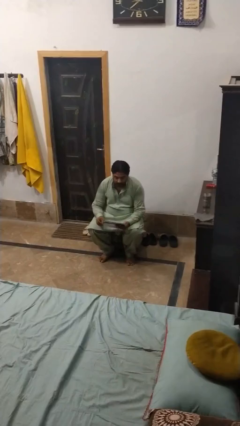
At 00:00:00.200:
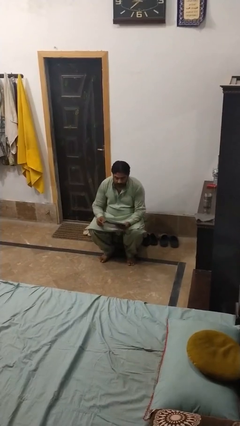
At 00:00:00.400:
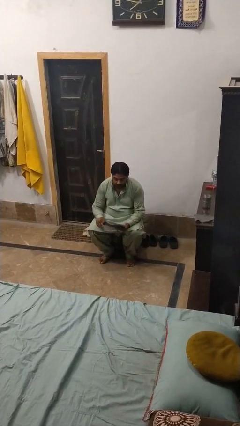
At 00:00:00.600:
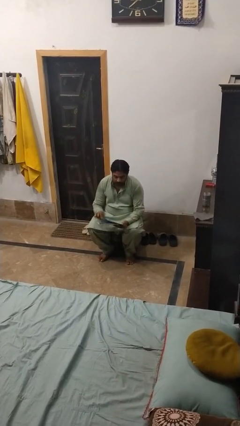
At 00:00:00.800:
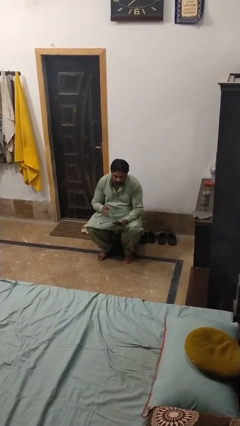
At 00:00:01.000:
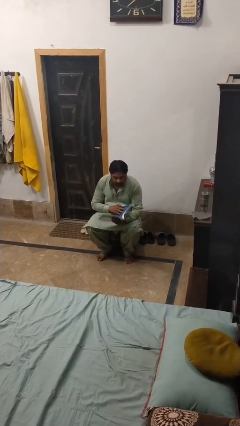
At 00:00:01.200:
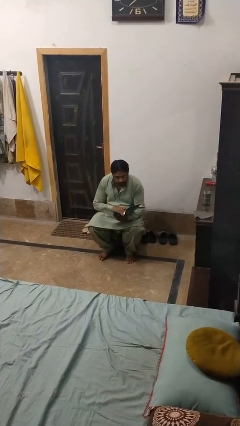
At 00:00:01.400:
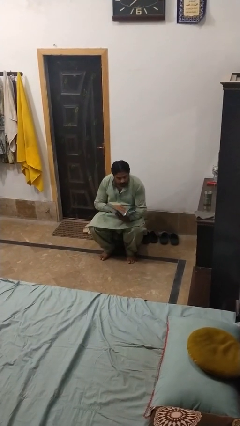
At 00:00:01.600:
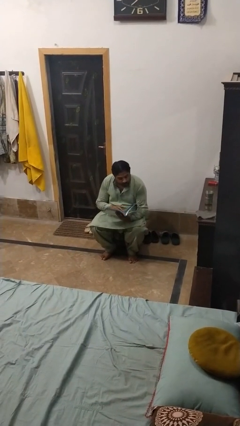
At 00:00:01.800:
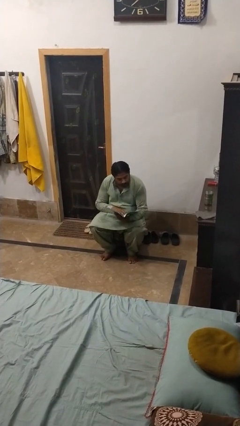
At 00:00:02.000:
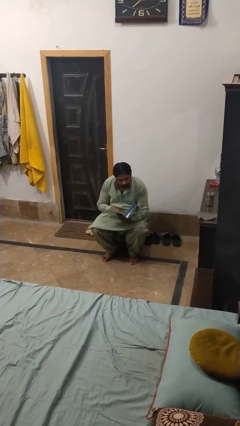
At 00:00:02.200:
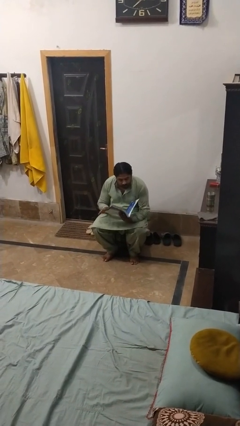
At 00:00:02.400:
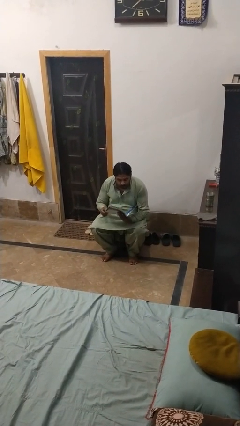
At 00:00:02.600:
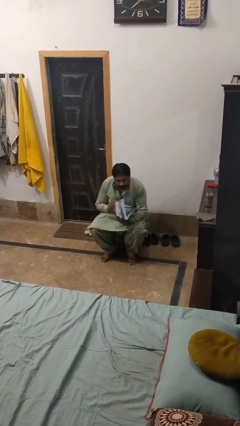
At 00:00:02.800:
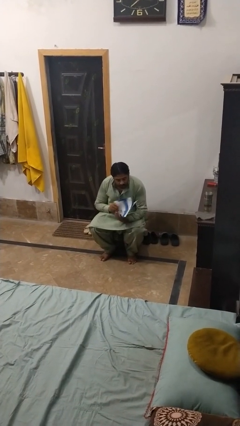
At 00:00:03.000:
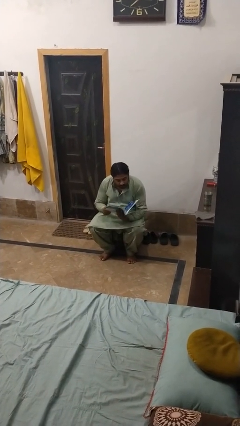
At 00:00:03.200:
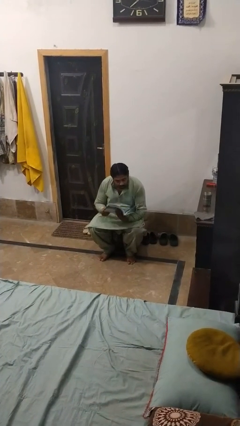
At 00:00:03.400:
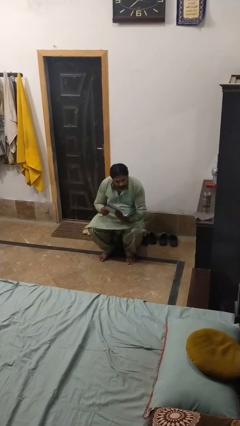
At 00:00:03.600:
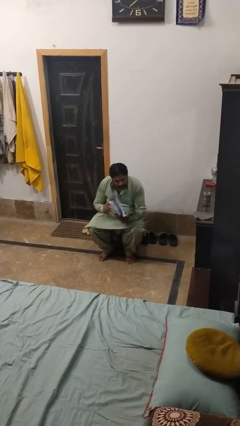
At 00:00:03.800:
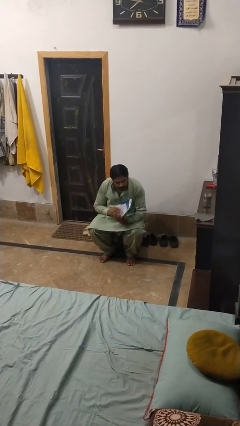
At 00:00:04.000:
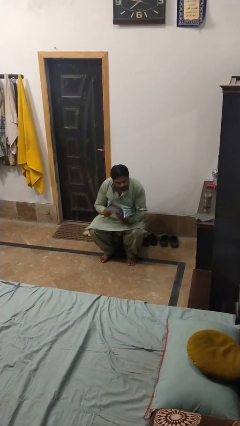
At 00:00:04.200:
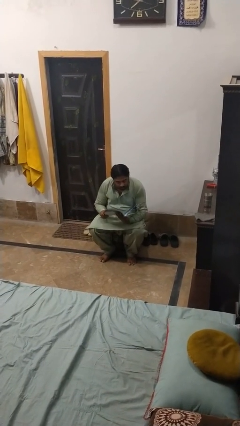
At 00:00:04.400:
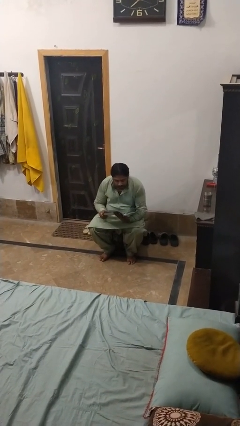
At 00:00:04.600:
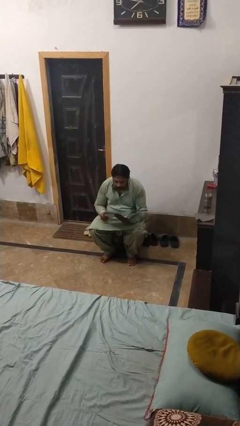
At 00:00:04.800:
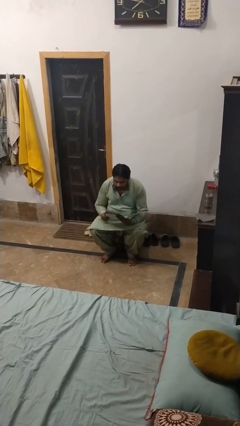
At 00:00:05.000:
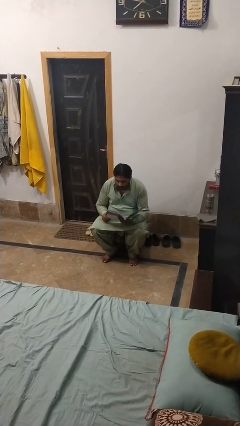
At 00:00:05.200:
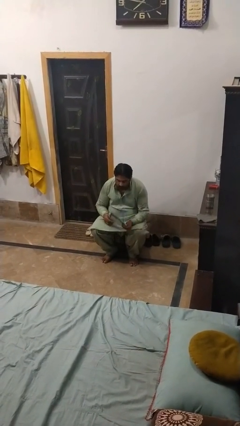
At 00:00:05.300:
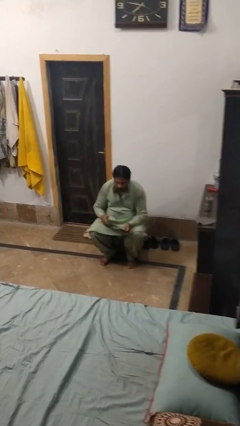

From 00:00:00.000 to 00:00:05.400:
person reads magazine

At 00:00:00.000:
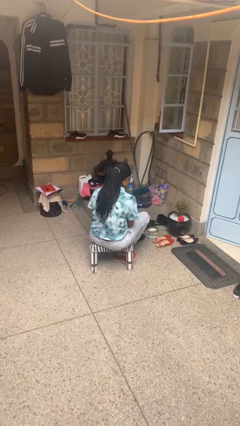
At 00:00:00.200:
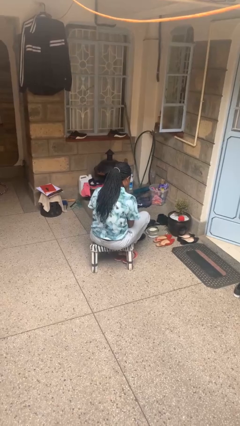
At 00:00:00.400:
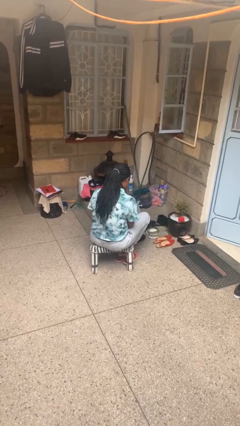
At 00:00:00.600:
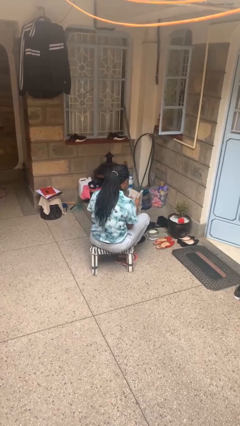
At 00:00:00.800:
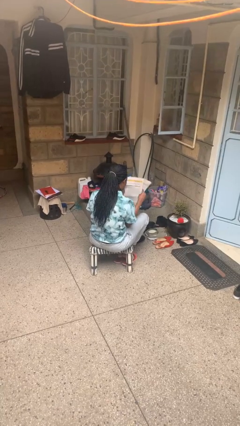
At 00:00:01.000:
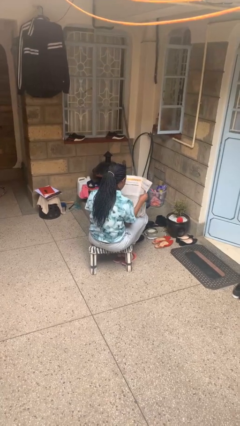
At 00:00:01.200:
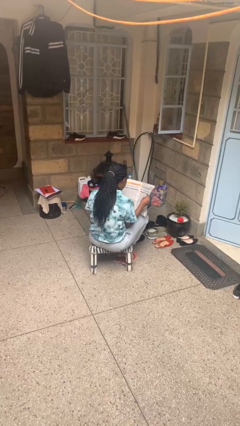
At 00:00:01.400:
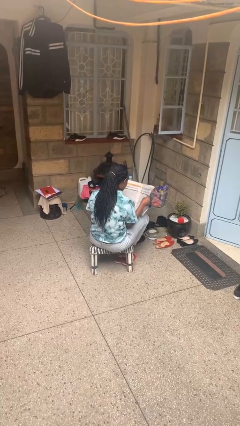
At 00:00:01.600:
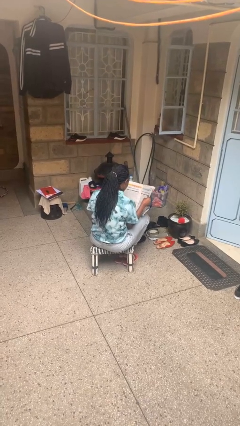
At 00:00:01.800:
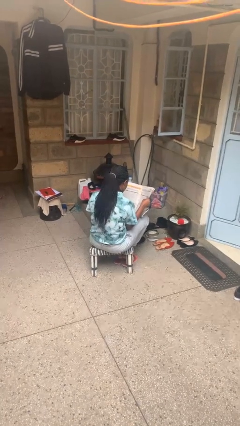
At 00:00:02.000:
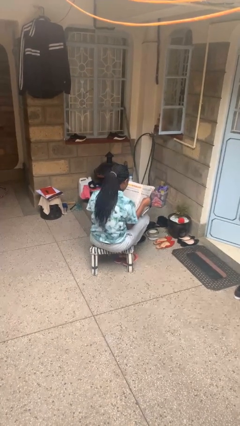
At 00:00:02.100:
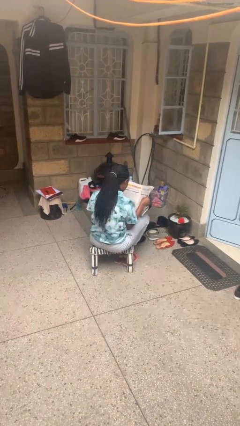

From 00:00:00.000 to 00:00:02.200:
person reads newspaper

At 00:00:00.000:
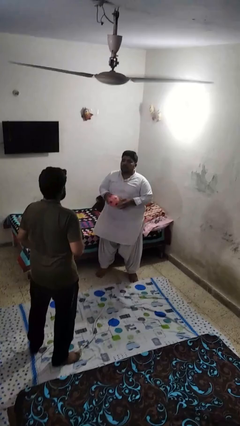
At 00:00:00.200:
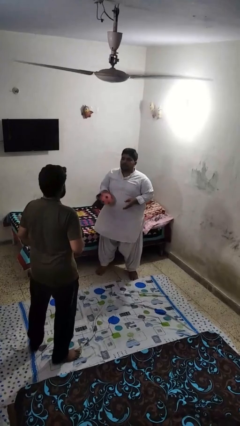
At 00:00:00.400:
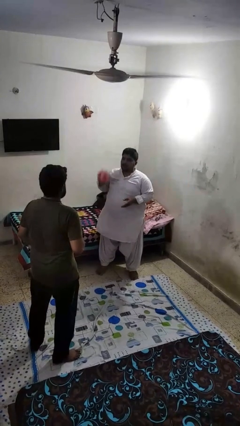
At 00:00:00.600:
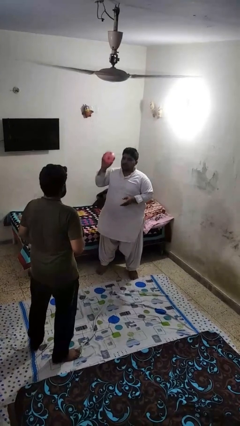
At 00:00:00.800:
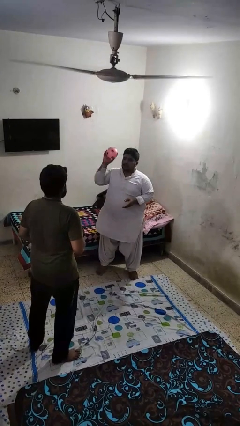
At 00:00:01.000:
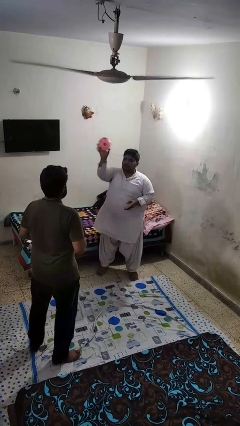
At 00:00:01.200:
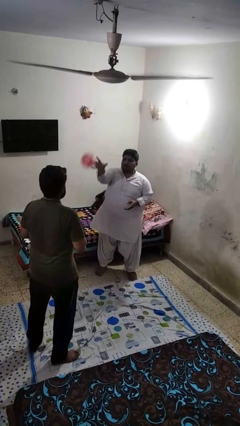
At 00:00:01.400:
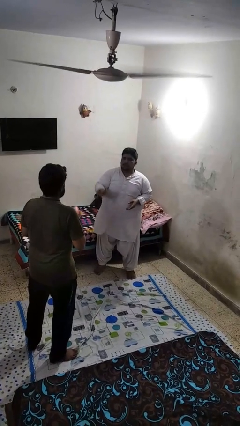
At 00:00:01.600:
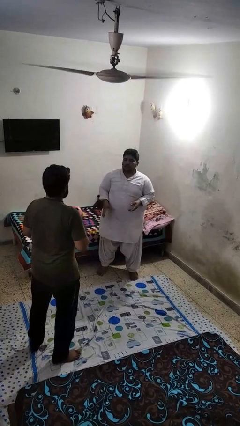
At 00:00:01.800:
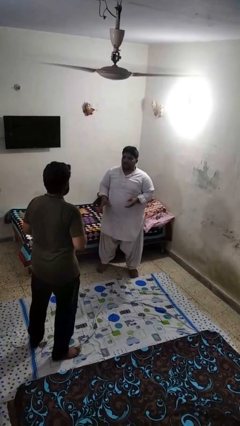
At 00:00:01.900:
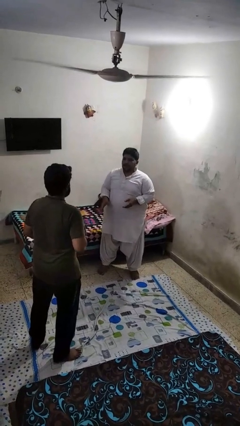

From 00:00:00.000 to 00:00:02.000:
person throws object to person

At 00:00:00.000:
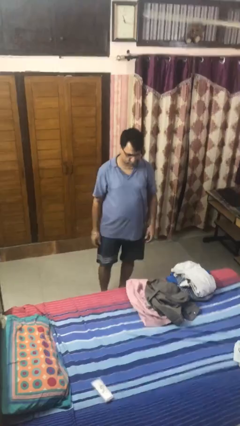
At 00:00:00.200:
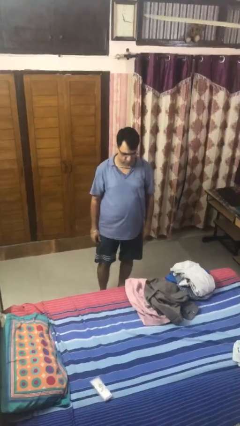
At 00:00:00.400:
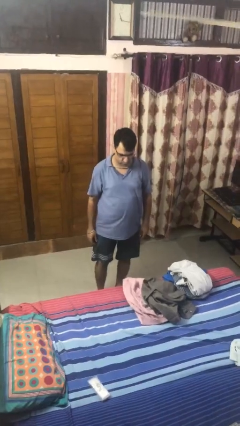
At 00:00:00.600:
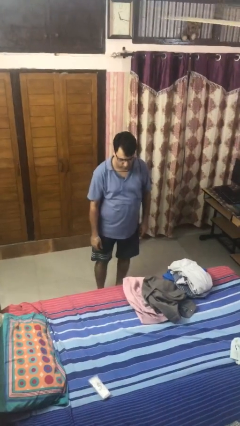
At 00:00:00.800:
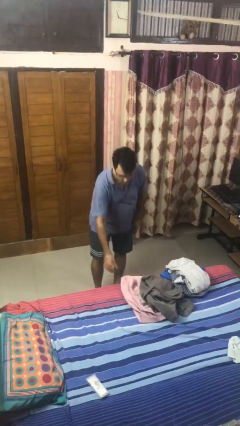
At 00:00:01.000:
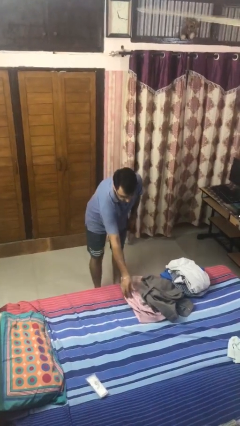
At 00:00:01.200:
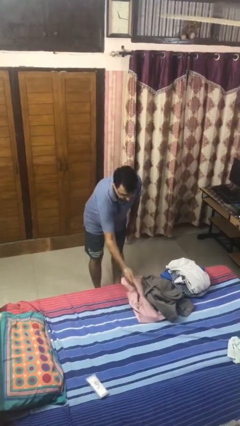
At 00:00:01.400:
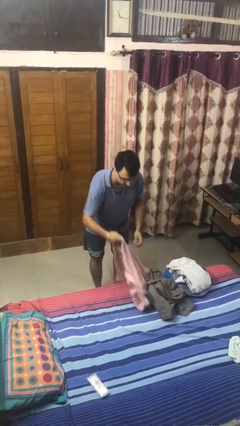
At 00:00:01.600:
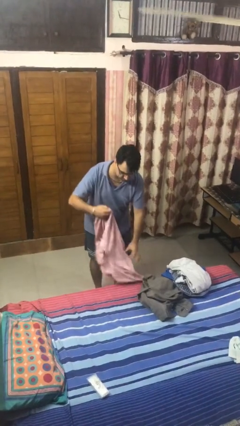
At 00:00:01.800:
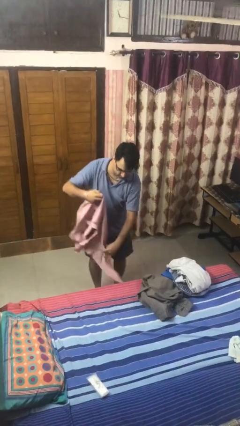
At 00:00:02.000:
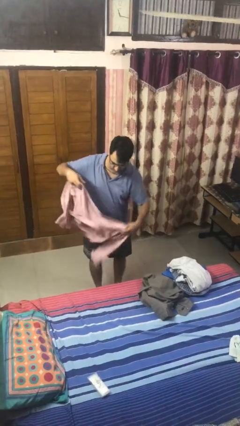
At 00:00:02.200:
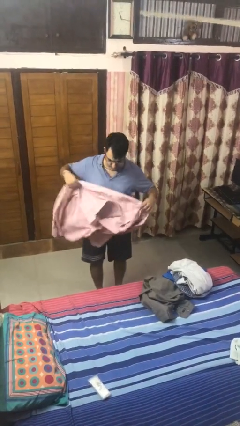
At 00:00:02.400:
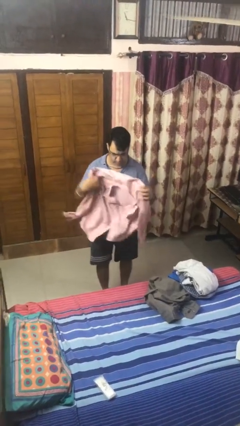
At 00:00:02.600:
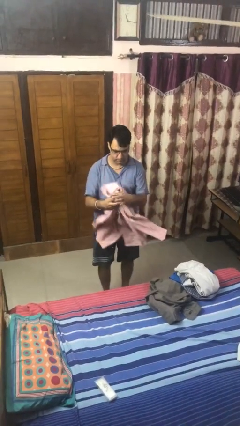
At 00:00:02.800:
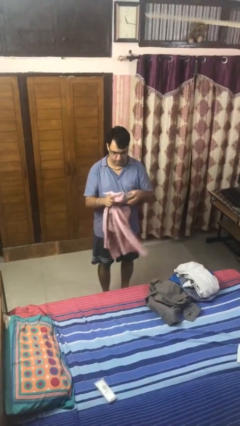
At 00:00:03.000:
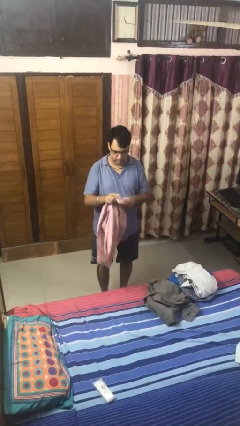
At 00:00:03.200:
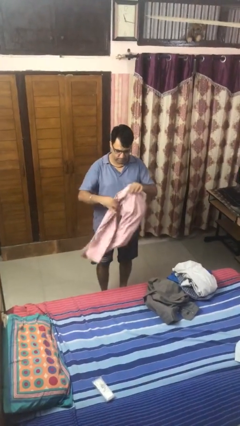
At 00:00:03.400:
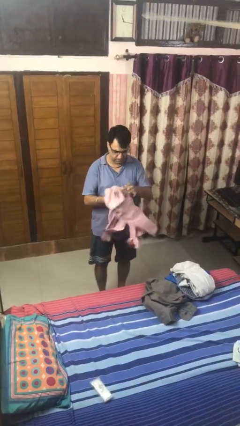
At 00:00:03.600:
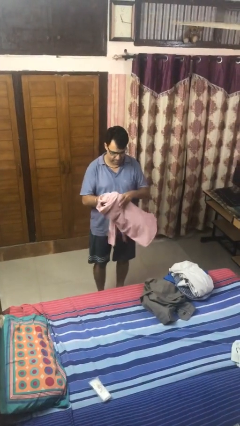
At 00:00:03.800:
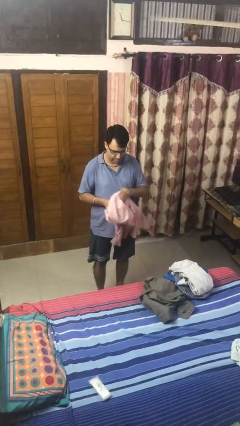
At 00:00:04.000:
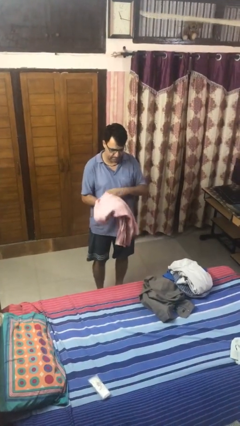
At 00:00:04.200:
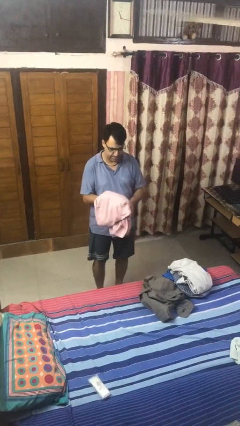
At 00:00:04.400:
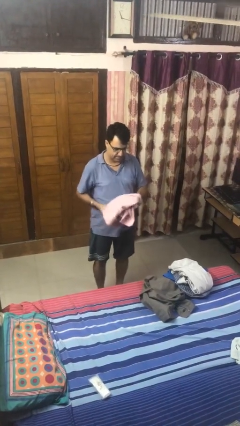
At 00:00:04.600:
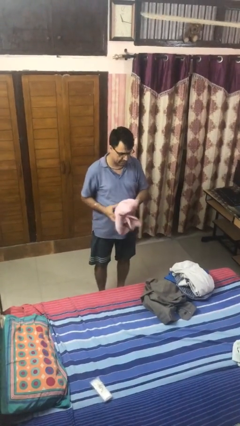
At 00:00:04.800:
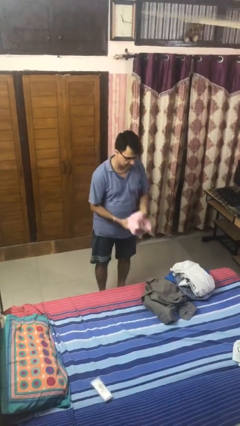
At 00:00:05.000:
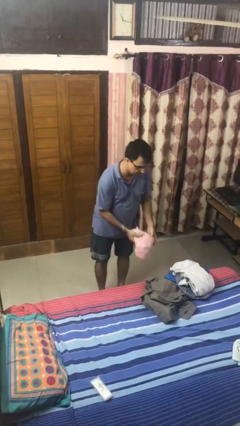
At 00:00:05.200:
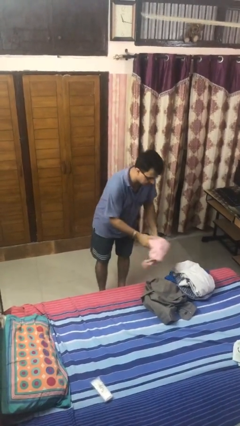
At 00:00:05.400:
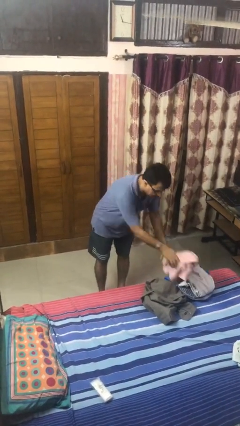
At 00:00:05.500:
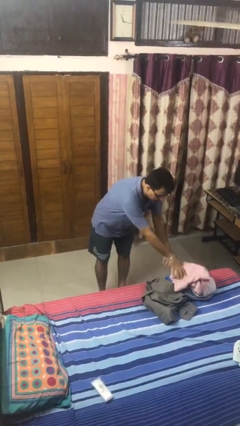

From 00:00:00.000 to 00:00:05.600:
person folds shirt

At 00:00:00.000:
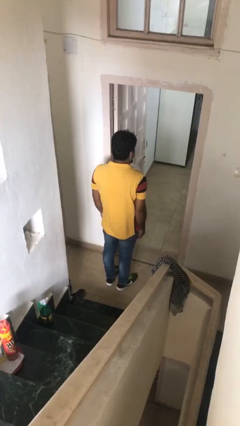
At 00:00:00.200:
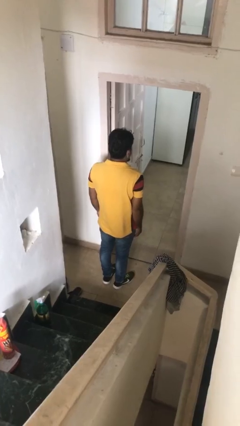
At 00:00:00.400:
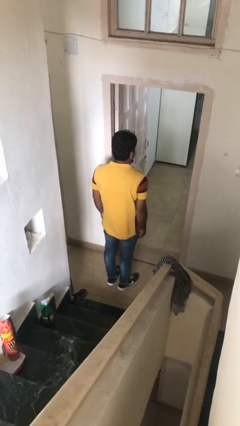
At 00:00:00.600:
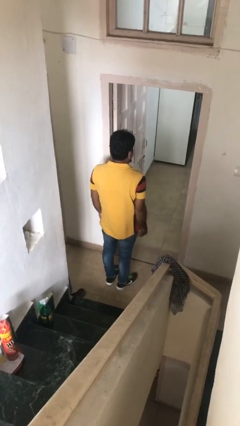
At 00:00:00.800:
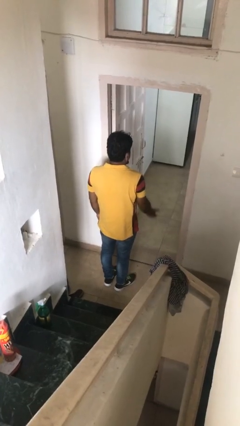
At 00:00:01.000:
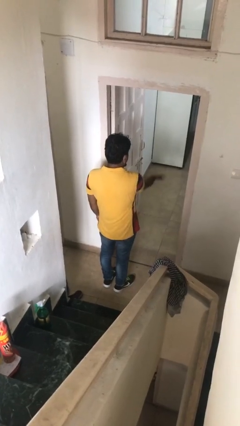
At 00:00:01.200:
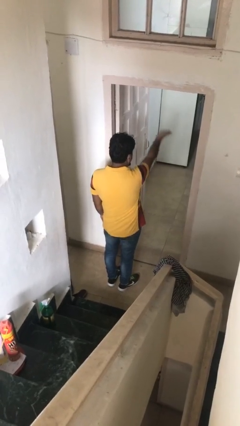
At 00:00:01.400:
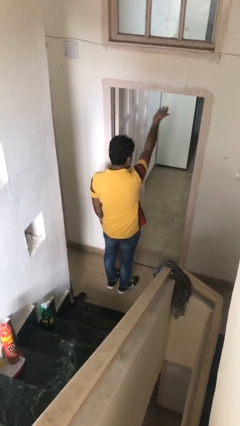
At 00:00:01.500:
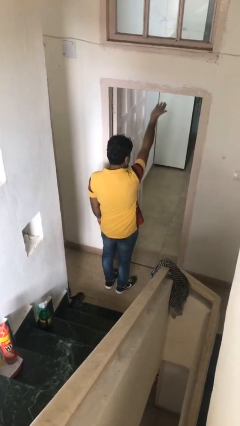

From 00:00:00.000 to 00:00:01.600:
person gestures swipe up

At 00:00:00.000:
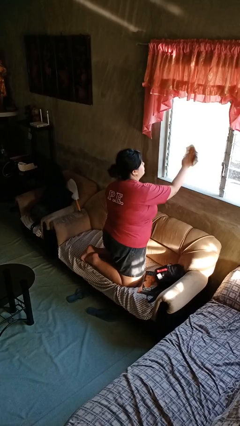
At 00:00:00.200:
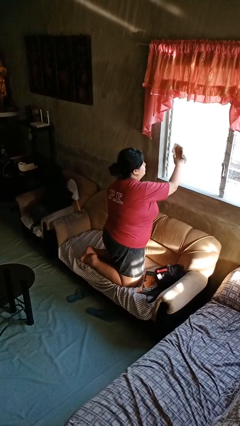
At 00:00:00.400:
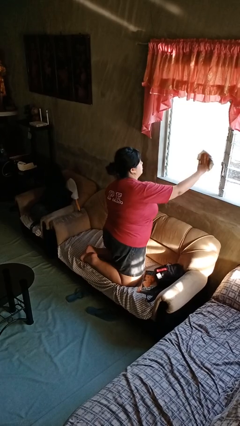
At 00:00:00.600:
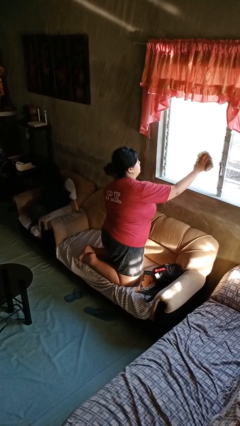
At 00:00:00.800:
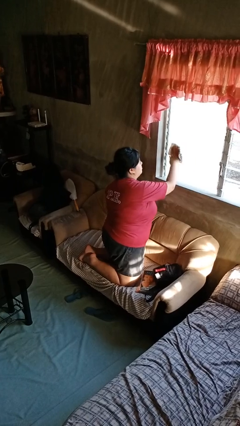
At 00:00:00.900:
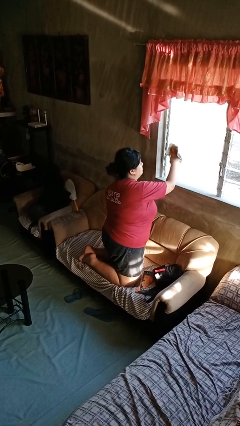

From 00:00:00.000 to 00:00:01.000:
person washes window
